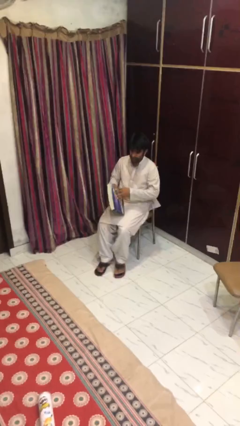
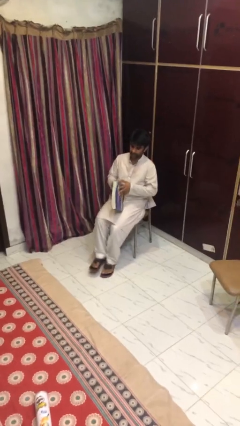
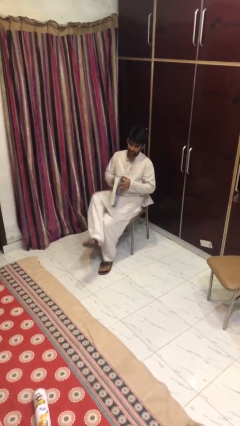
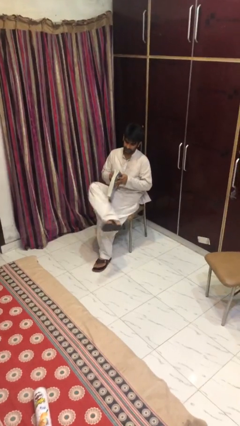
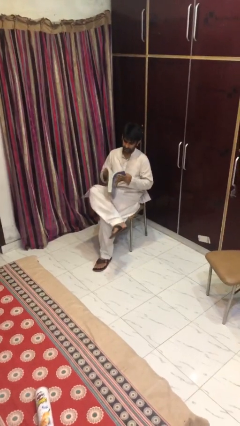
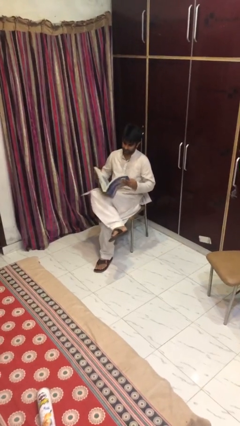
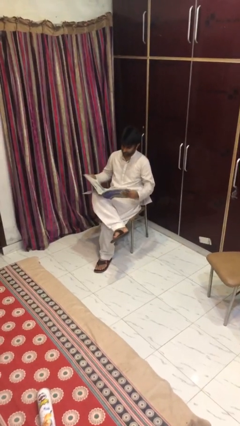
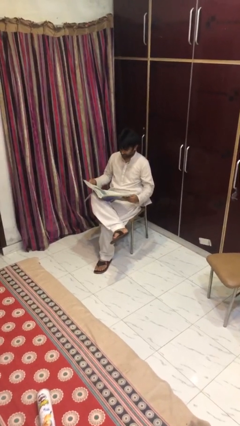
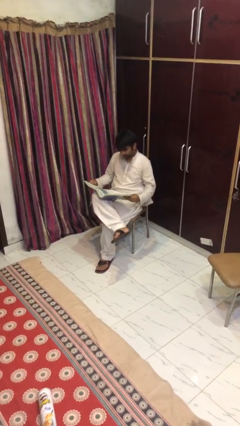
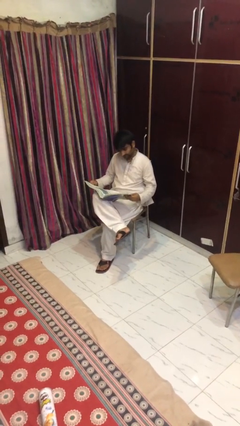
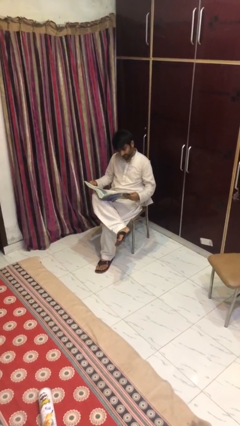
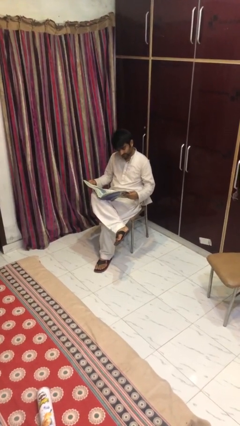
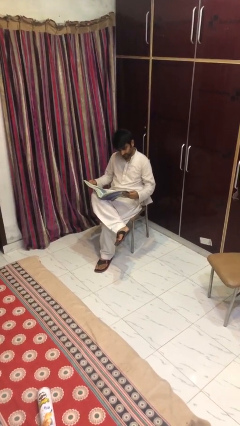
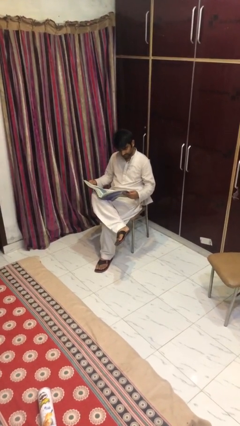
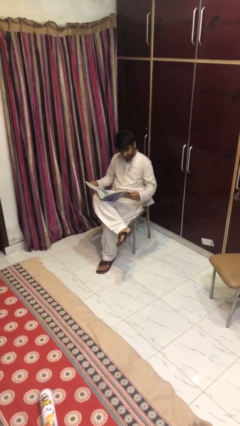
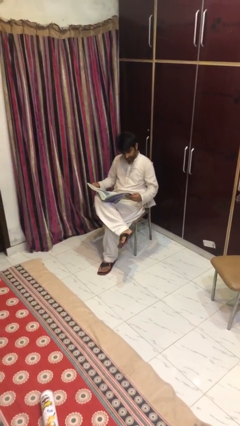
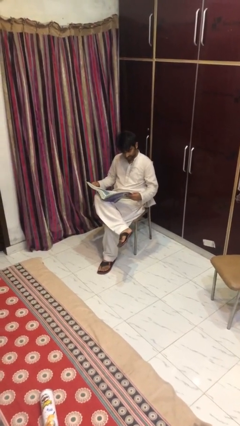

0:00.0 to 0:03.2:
person reads document

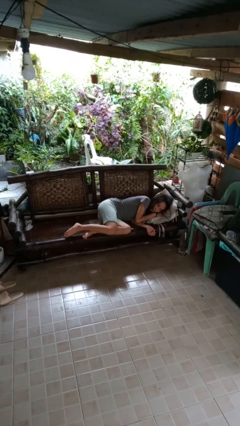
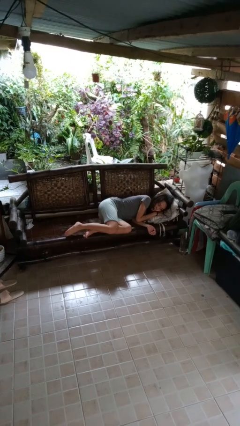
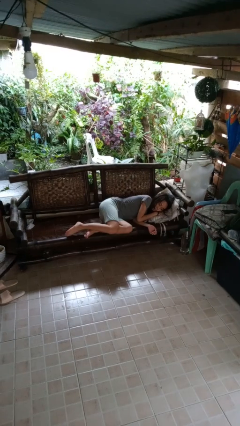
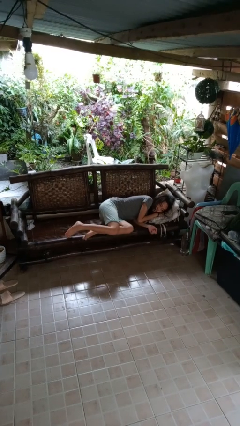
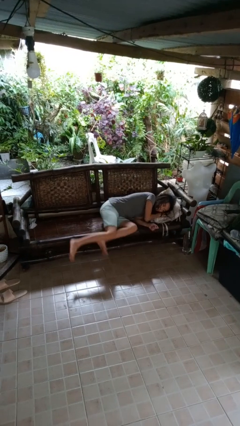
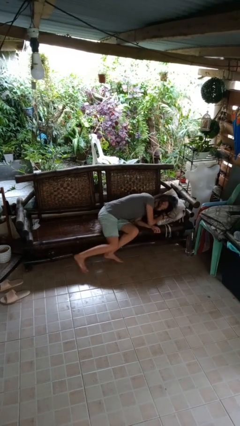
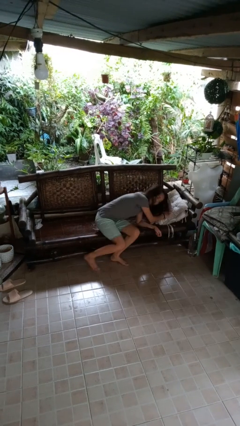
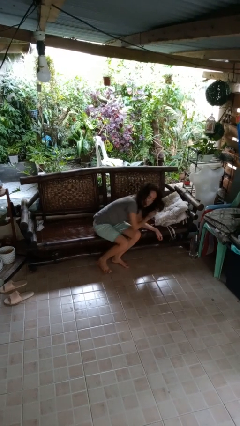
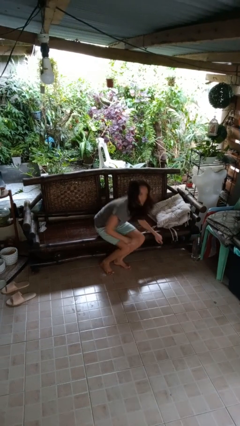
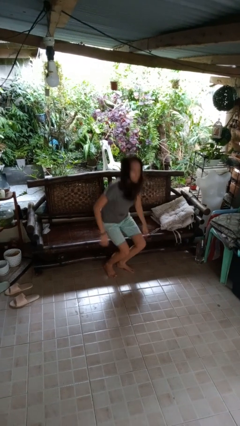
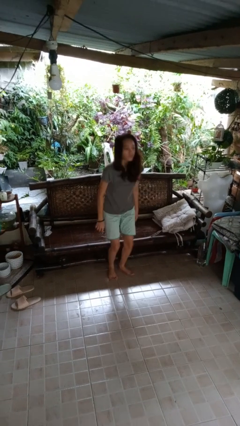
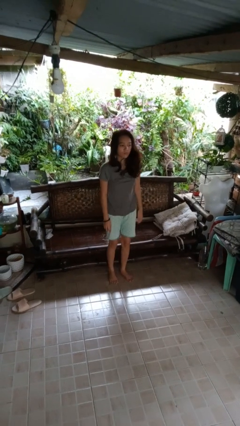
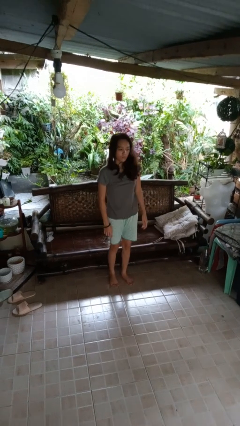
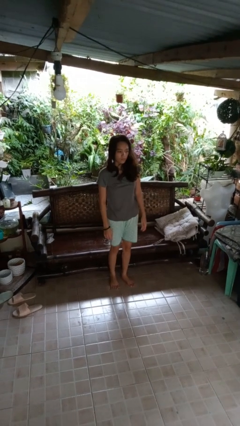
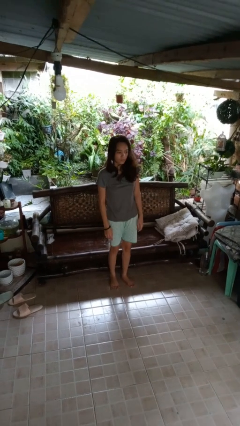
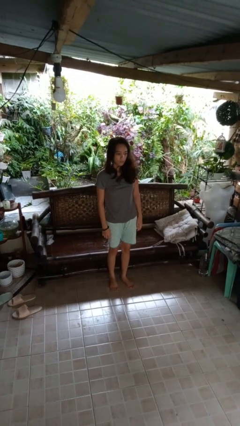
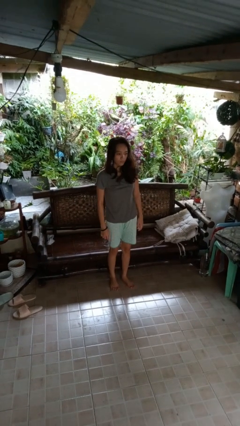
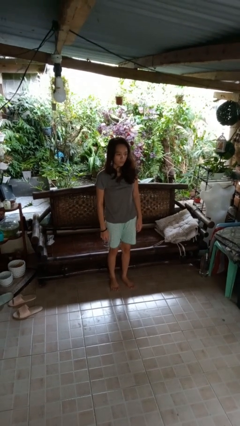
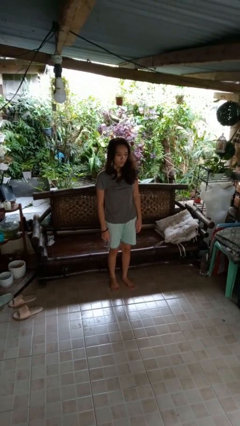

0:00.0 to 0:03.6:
person stands up

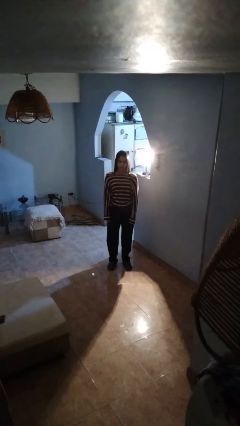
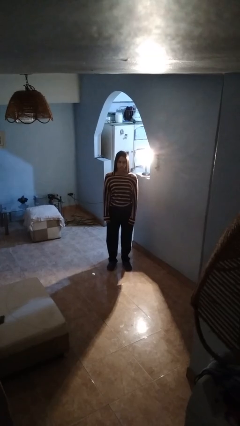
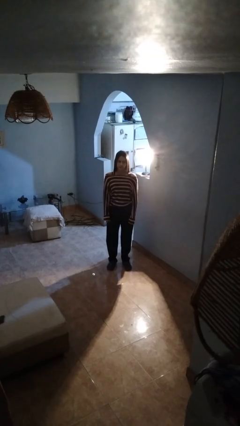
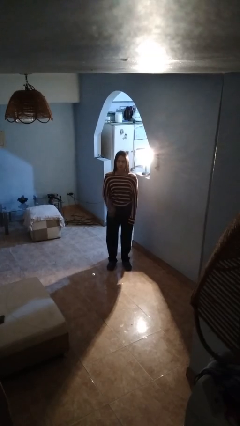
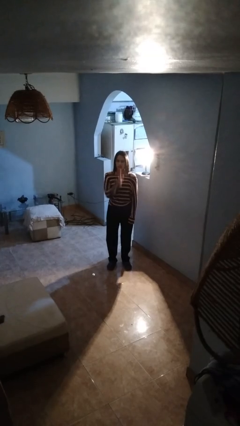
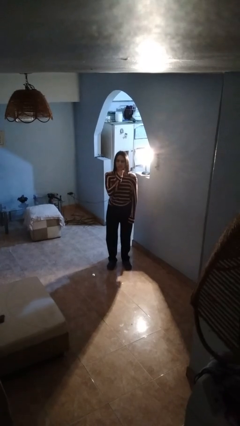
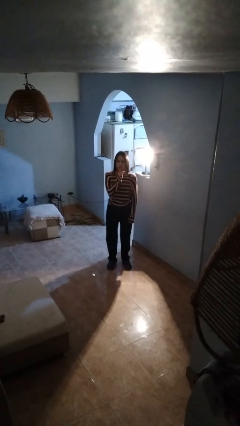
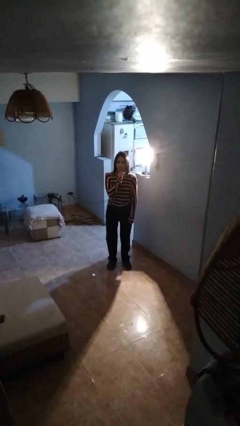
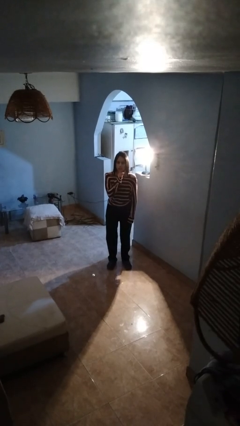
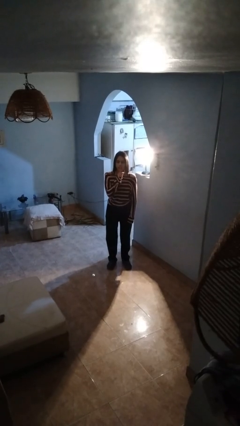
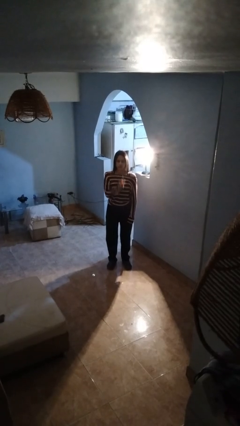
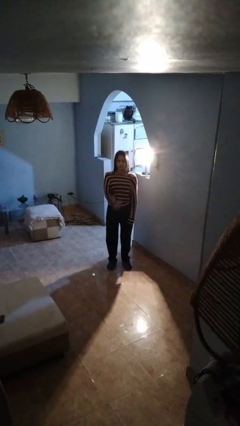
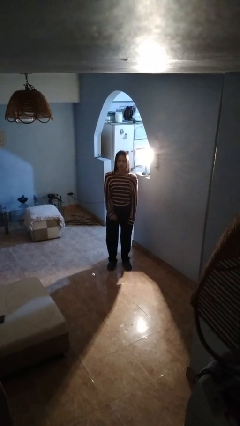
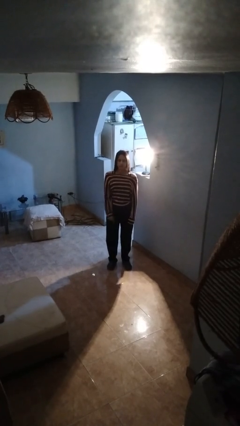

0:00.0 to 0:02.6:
person gestures be quiet

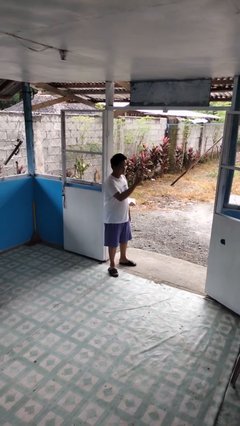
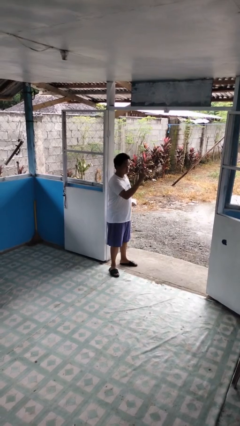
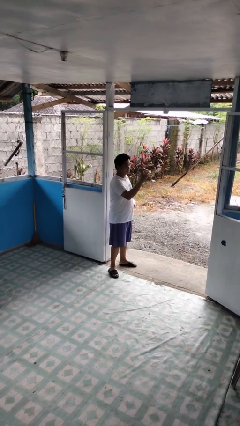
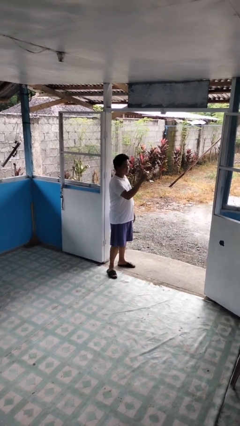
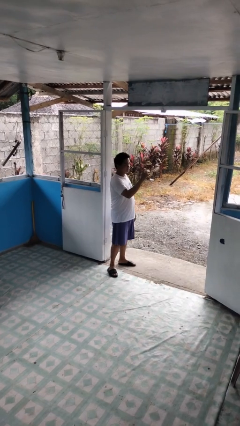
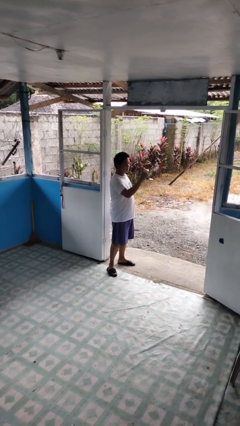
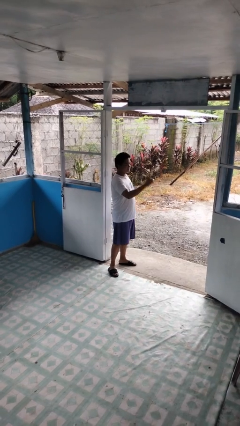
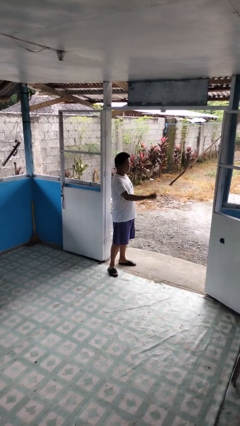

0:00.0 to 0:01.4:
person gestures number one

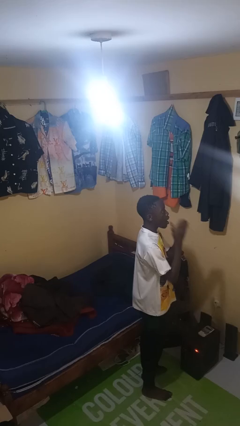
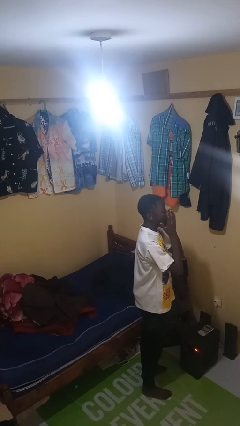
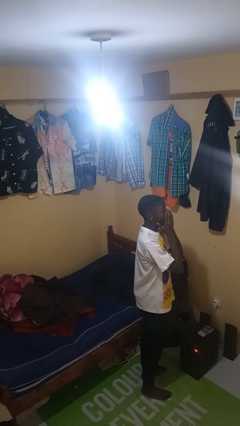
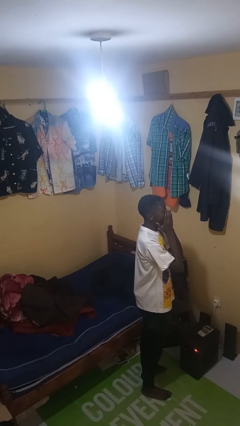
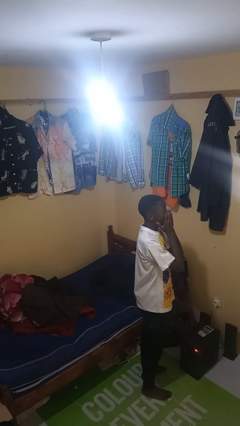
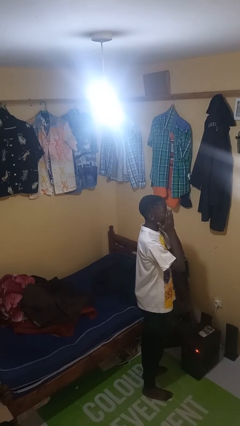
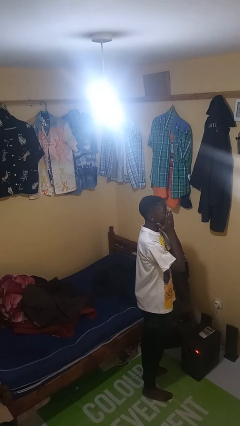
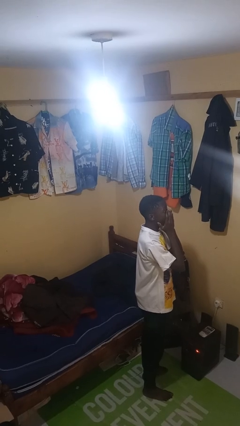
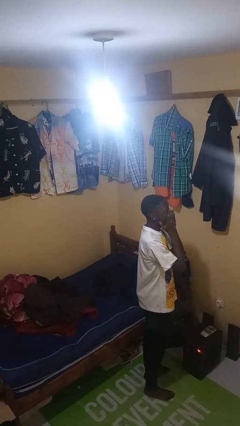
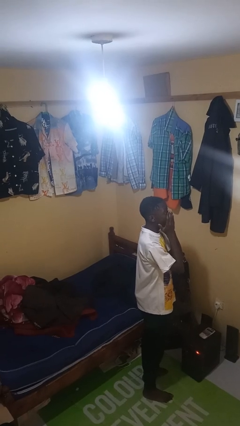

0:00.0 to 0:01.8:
person covers face with hands

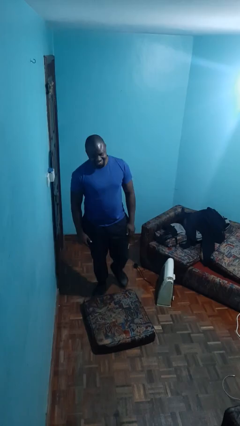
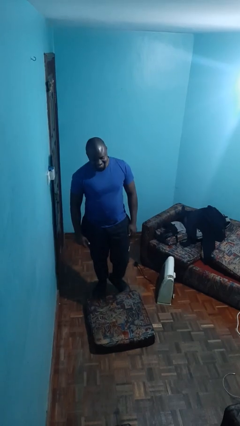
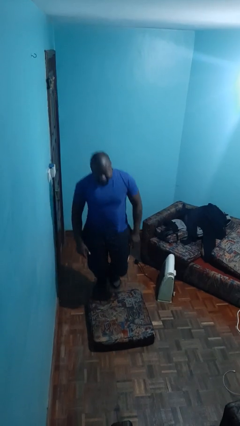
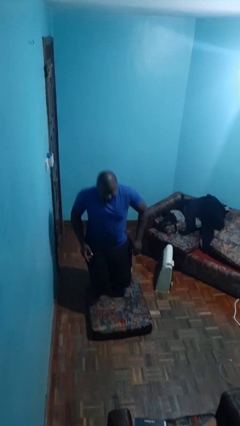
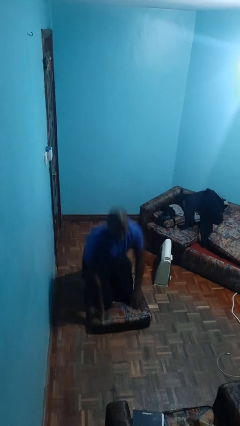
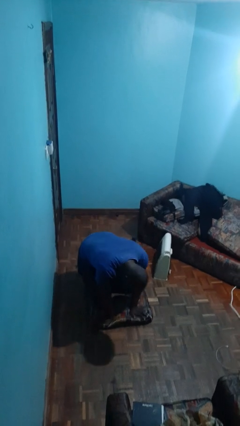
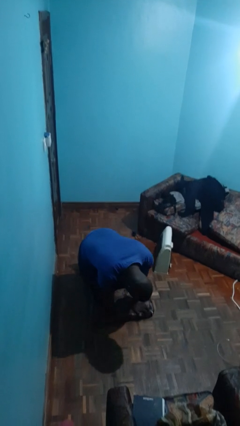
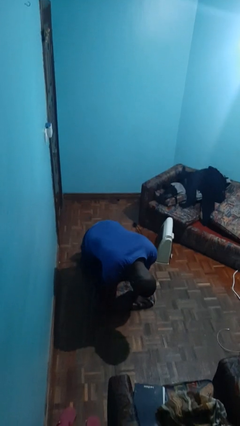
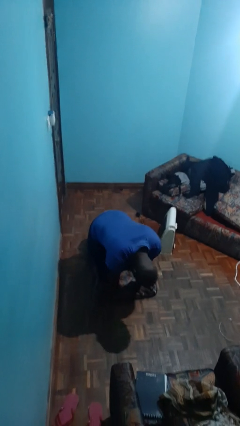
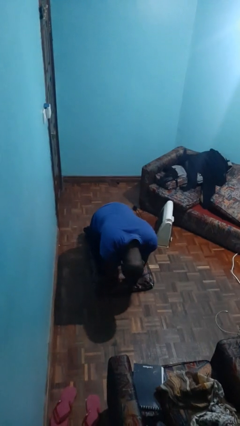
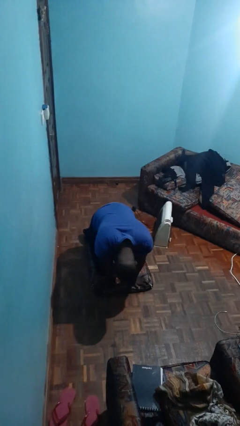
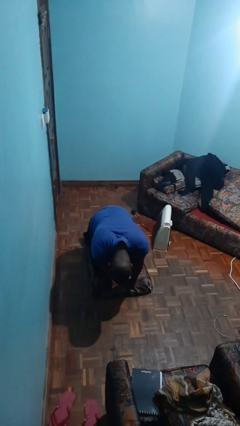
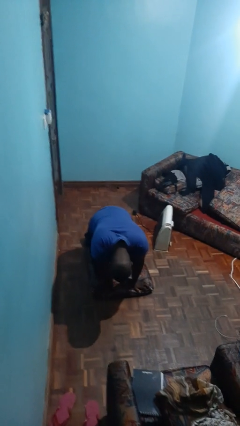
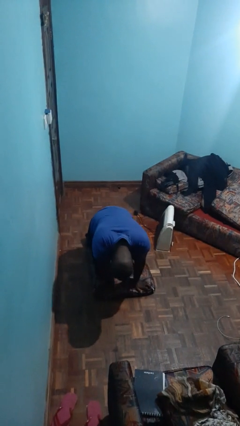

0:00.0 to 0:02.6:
person trips on object on floor

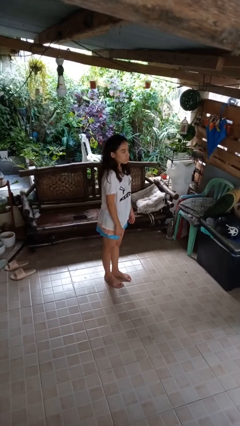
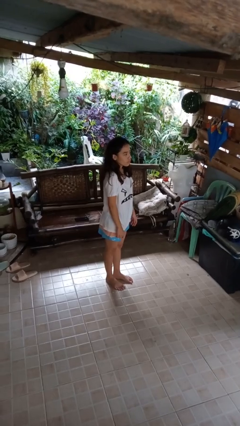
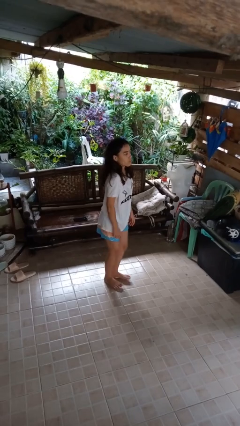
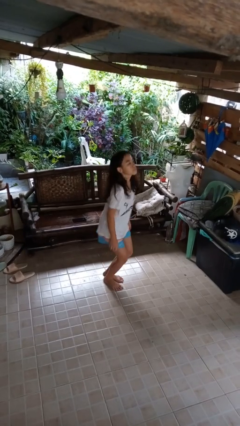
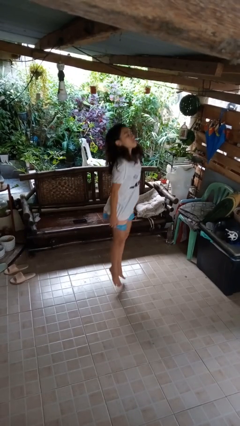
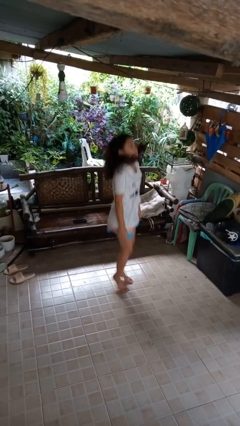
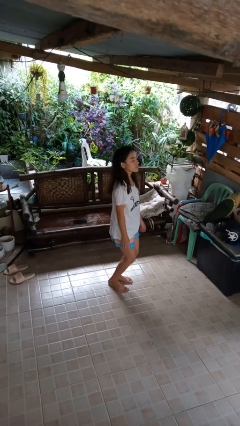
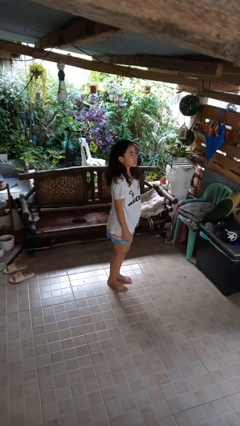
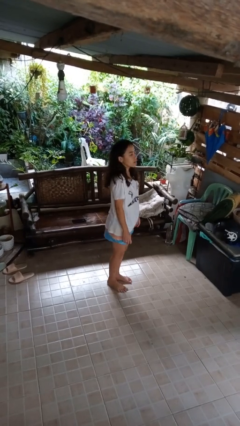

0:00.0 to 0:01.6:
person jumps

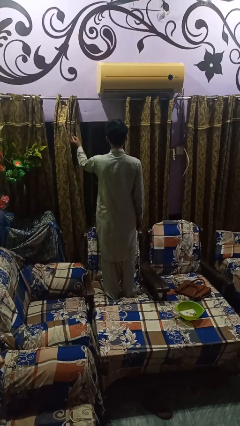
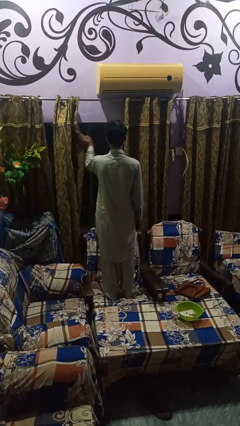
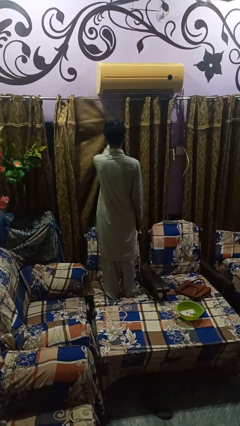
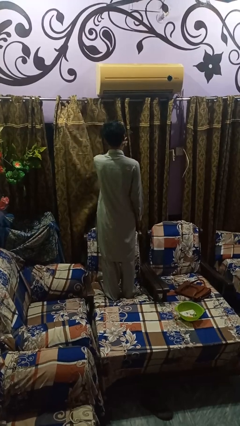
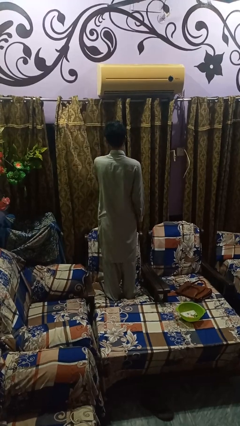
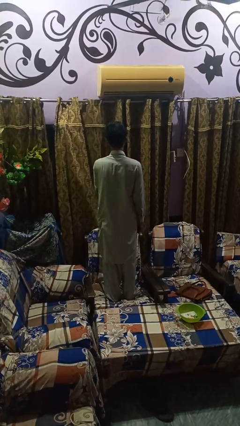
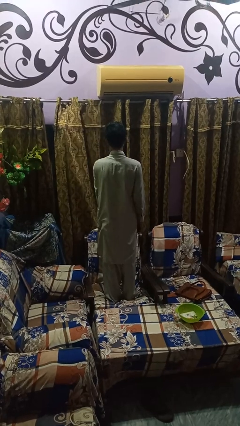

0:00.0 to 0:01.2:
person closes curtains
